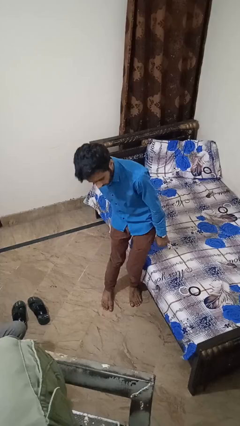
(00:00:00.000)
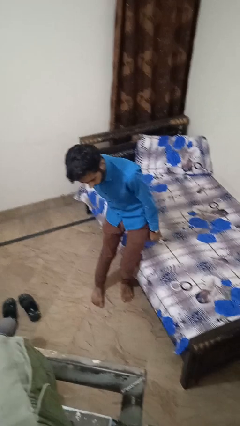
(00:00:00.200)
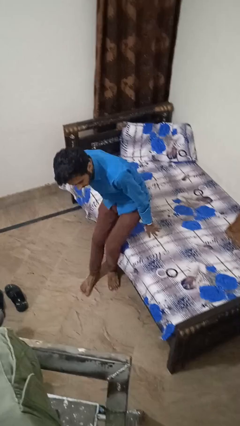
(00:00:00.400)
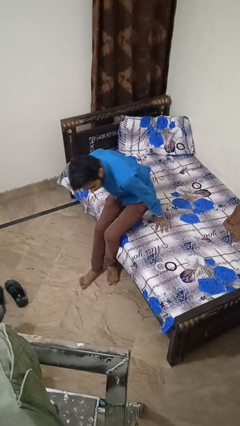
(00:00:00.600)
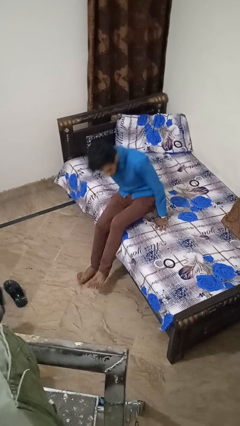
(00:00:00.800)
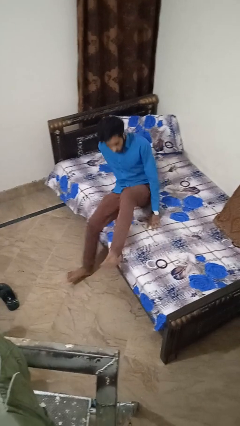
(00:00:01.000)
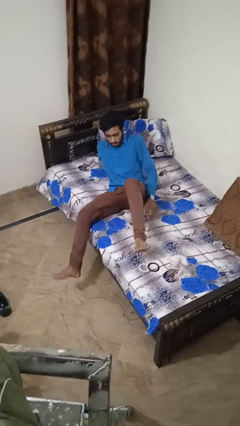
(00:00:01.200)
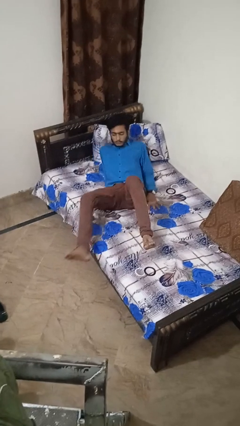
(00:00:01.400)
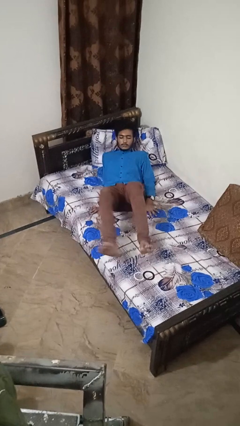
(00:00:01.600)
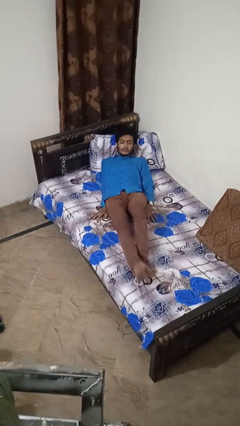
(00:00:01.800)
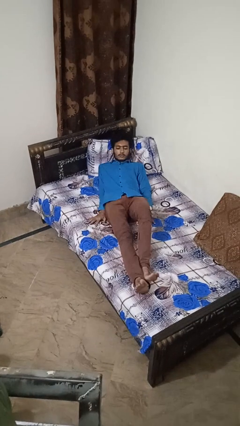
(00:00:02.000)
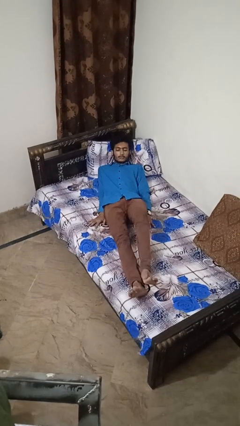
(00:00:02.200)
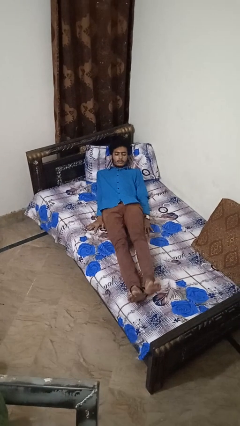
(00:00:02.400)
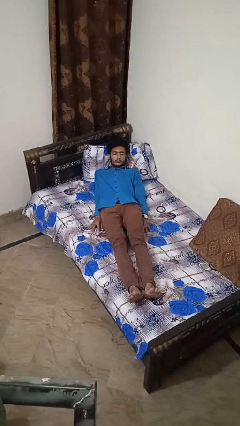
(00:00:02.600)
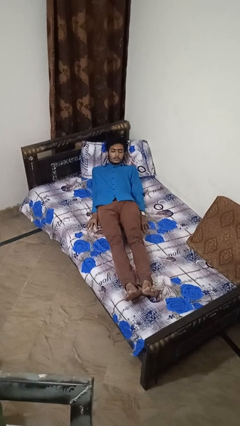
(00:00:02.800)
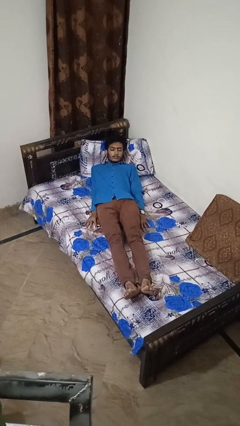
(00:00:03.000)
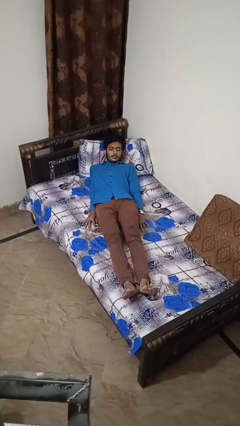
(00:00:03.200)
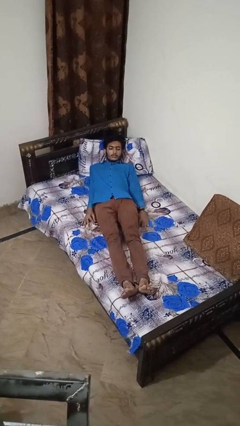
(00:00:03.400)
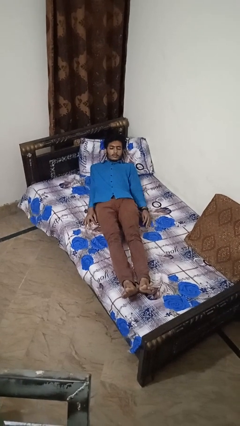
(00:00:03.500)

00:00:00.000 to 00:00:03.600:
person lies down on bed

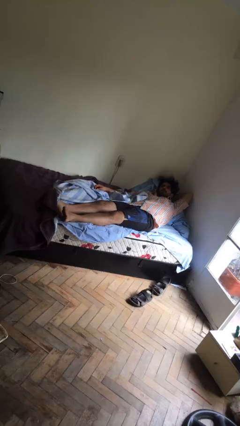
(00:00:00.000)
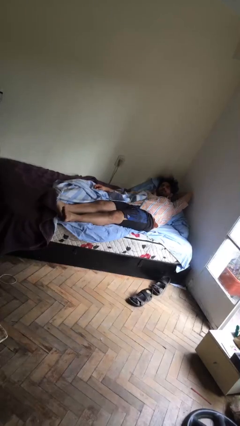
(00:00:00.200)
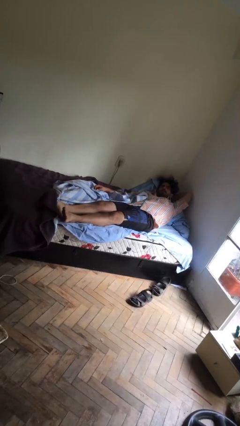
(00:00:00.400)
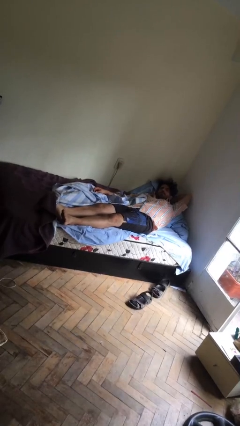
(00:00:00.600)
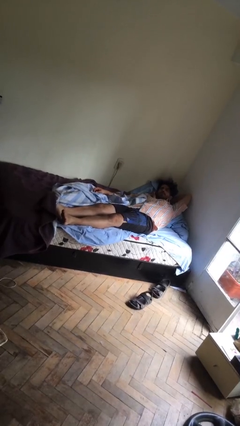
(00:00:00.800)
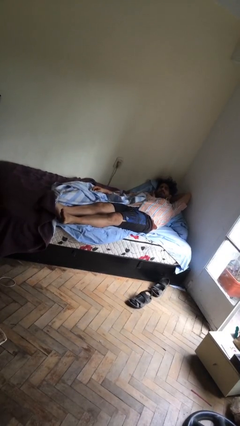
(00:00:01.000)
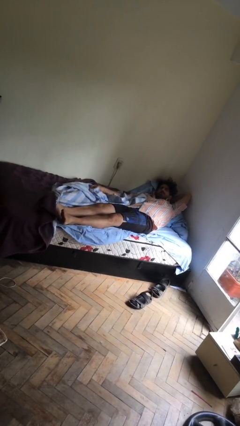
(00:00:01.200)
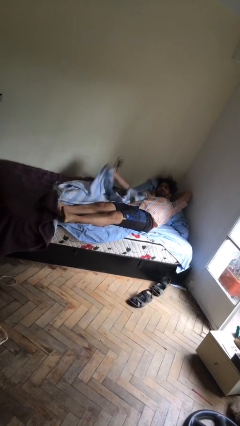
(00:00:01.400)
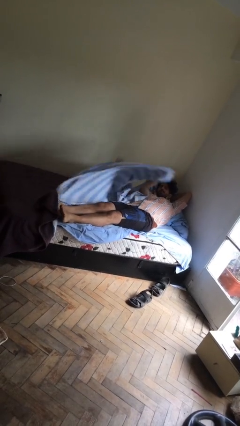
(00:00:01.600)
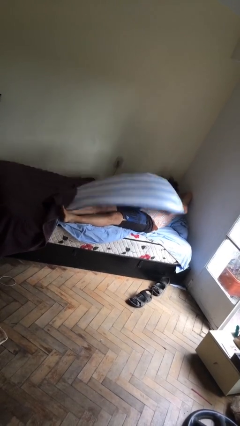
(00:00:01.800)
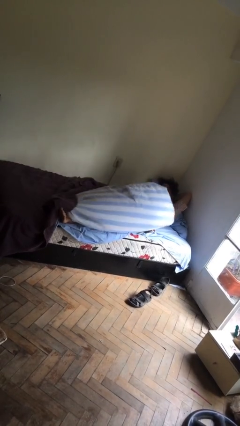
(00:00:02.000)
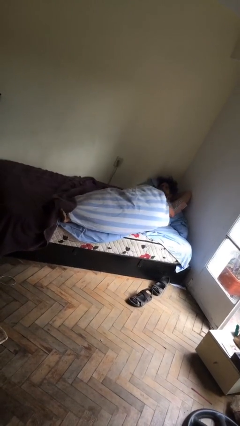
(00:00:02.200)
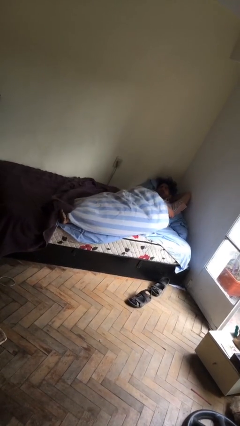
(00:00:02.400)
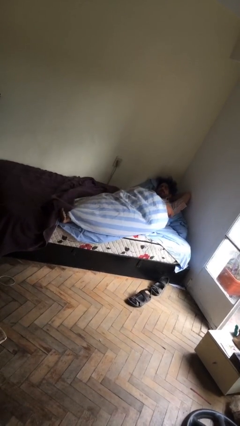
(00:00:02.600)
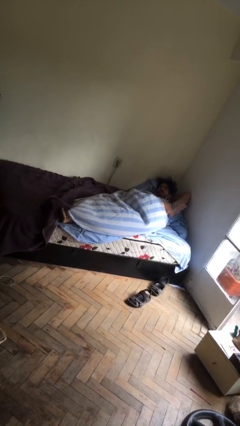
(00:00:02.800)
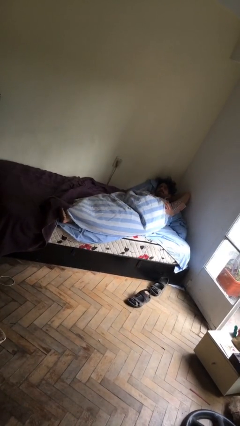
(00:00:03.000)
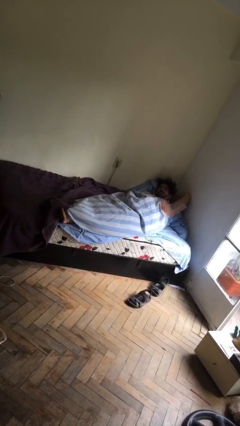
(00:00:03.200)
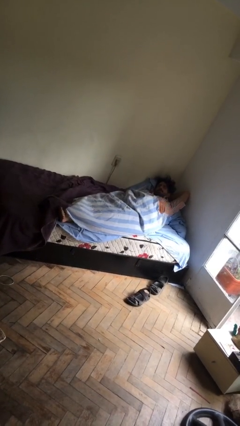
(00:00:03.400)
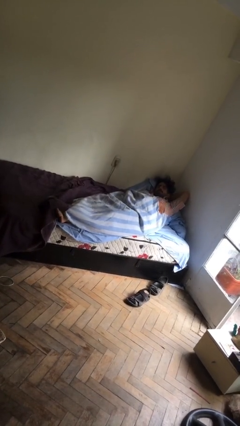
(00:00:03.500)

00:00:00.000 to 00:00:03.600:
person covers with bedsheets

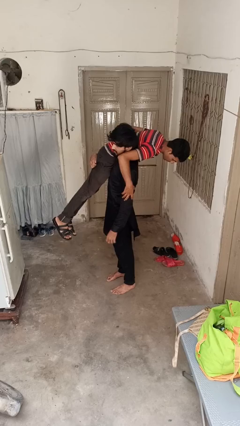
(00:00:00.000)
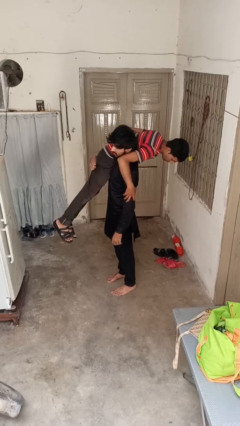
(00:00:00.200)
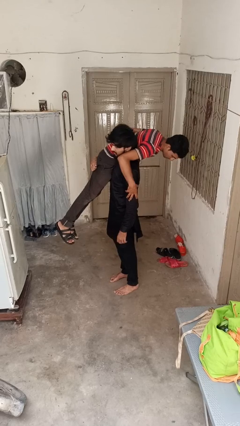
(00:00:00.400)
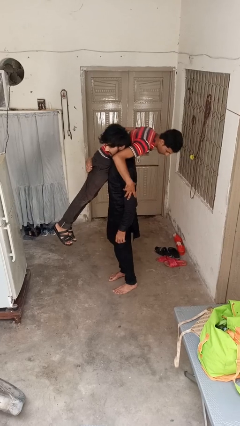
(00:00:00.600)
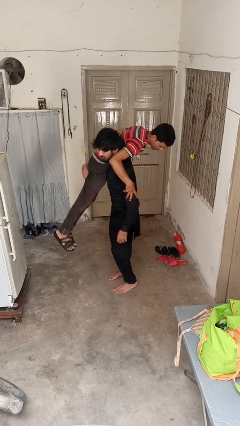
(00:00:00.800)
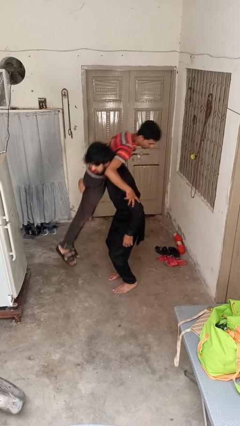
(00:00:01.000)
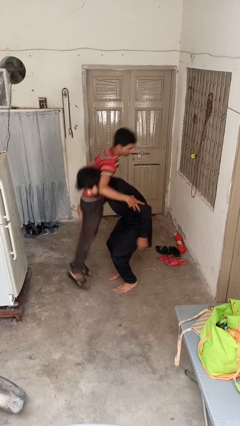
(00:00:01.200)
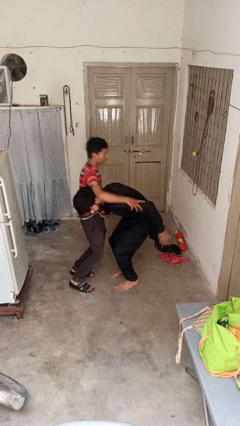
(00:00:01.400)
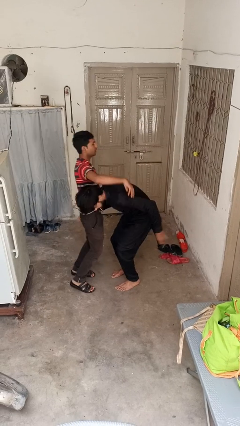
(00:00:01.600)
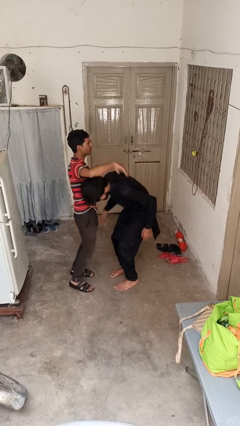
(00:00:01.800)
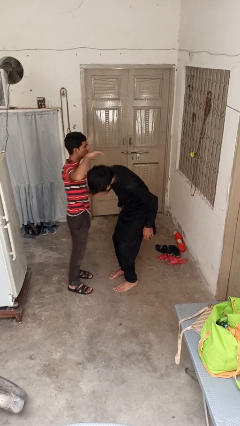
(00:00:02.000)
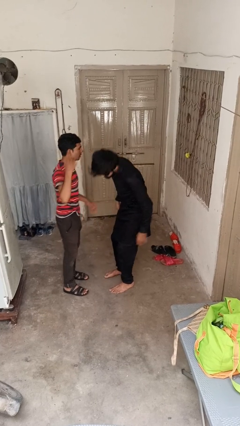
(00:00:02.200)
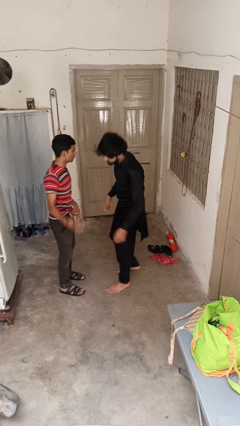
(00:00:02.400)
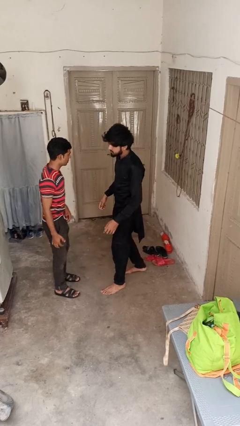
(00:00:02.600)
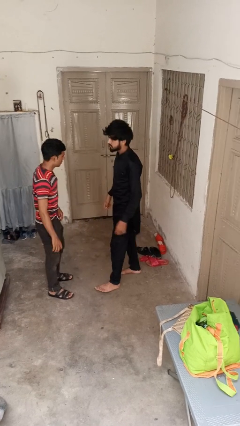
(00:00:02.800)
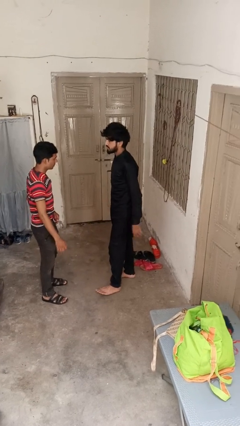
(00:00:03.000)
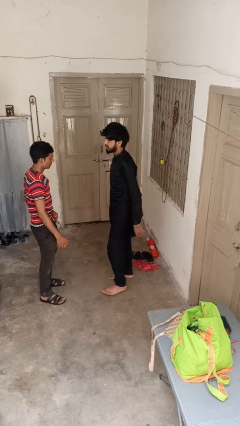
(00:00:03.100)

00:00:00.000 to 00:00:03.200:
person puts down person

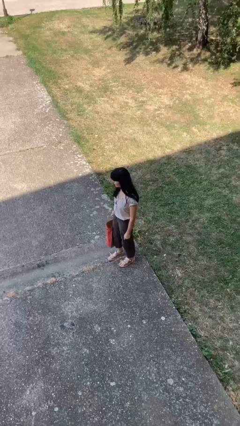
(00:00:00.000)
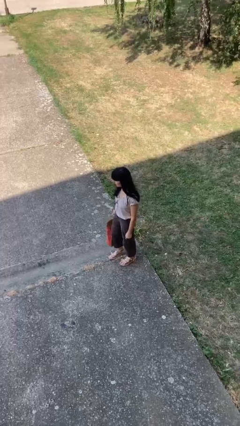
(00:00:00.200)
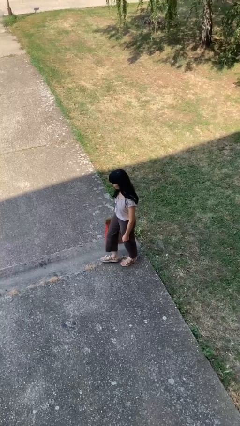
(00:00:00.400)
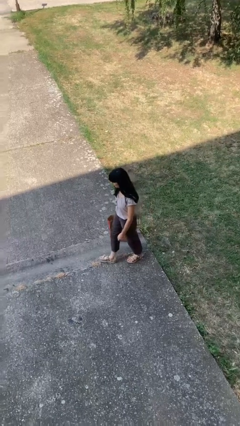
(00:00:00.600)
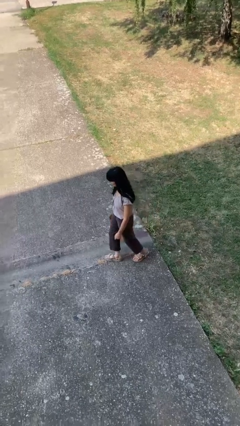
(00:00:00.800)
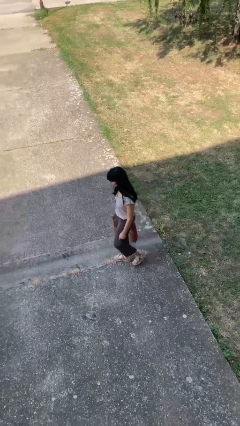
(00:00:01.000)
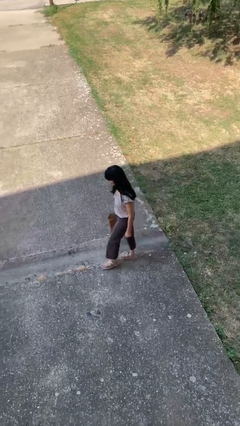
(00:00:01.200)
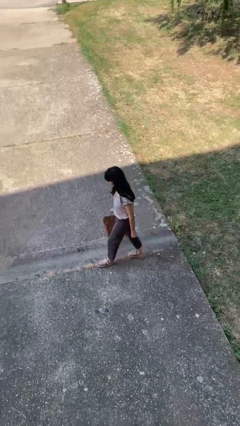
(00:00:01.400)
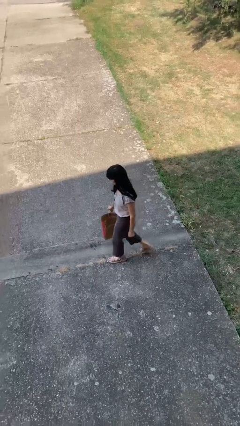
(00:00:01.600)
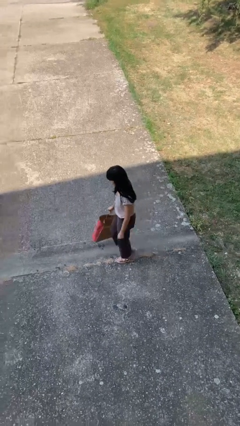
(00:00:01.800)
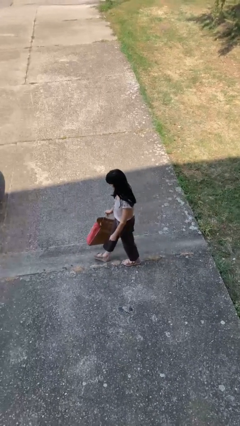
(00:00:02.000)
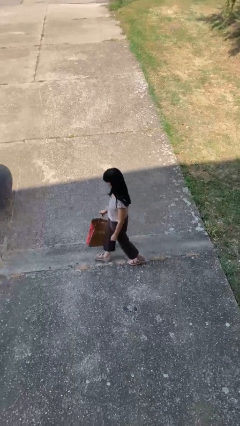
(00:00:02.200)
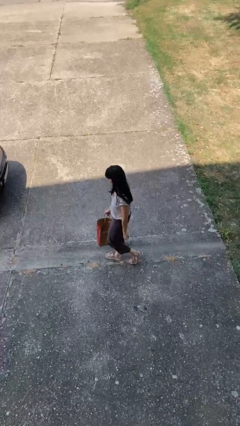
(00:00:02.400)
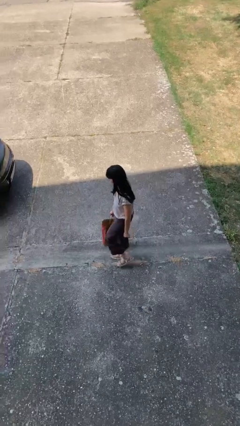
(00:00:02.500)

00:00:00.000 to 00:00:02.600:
person carries groceries

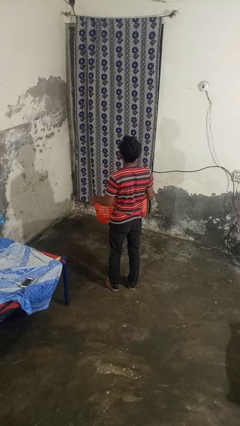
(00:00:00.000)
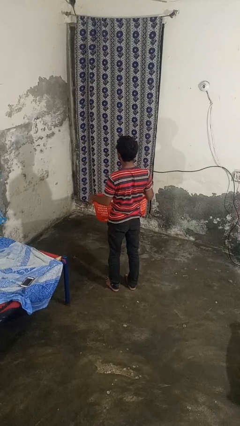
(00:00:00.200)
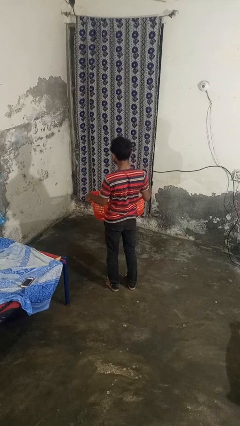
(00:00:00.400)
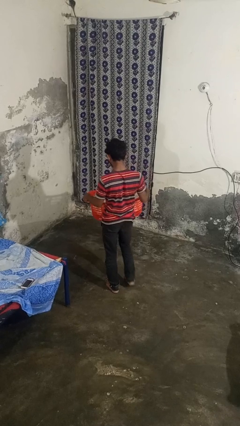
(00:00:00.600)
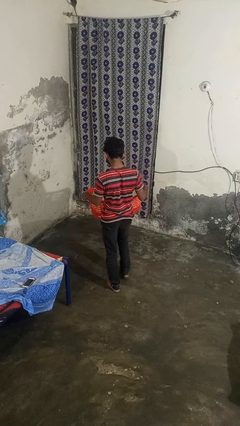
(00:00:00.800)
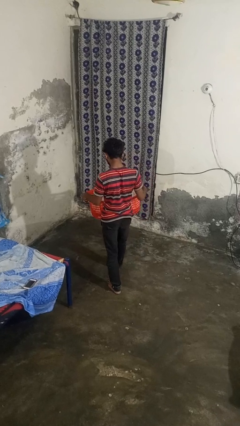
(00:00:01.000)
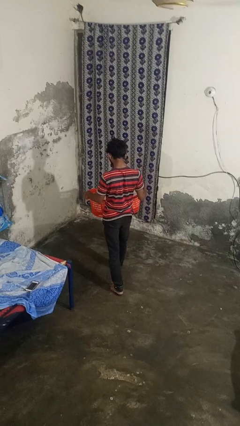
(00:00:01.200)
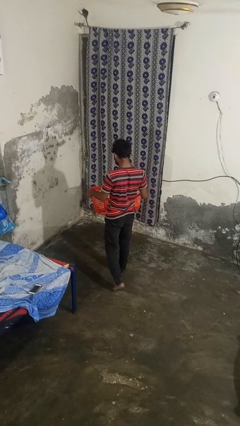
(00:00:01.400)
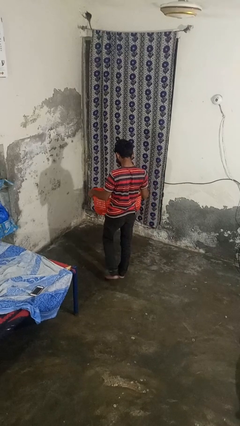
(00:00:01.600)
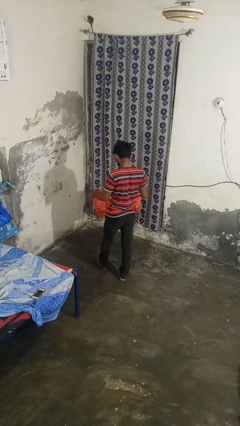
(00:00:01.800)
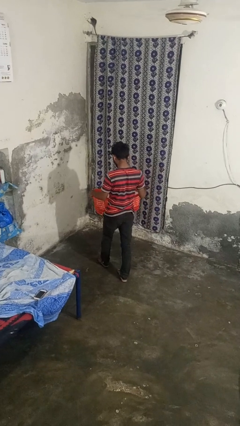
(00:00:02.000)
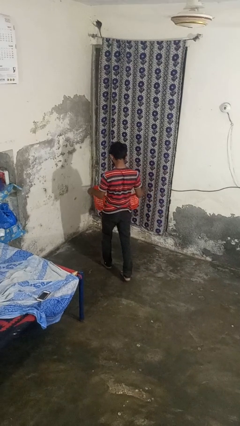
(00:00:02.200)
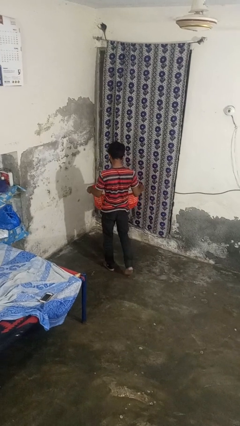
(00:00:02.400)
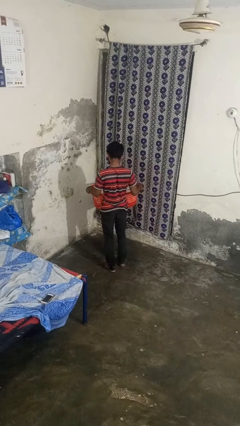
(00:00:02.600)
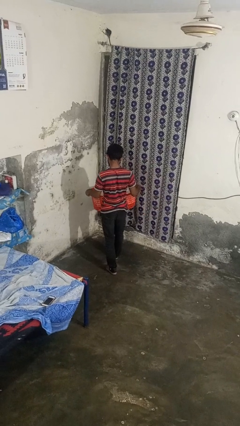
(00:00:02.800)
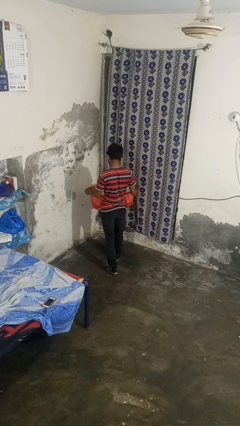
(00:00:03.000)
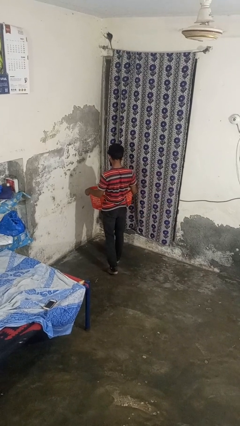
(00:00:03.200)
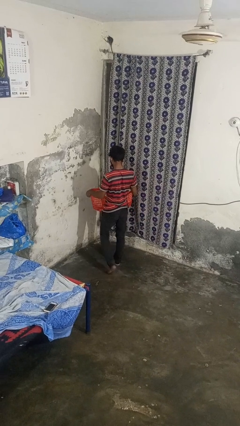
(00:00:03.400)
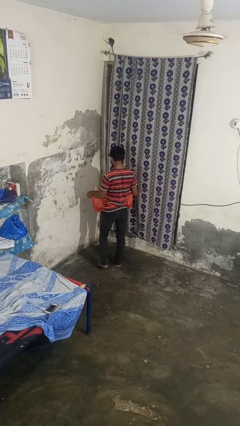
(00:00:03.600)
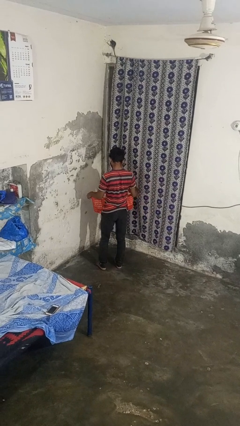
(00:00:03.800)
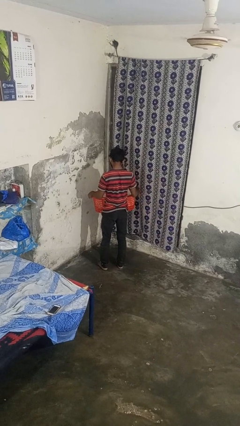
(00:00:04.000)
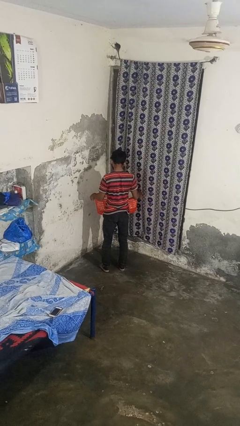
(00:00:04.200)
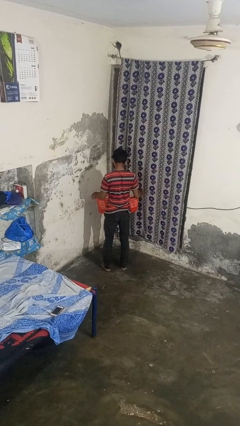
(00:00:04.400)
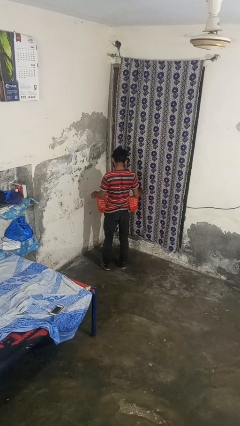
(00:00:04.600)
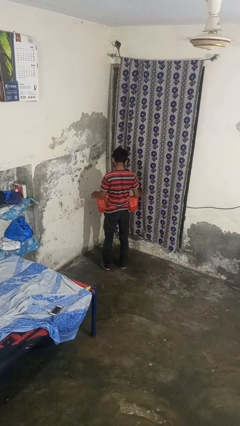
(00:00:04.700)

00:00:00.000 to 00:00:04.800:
person carries laundry basket
